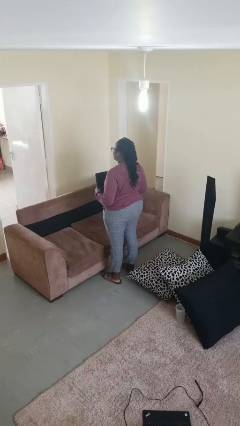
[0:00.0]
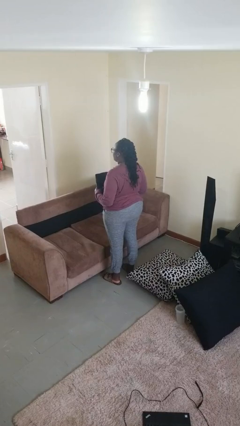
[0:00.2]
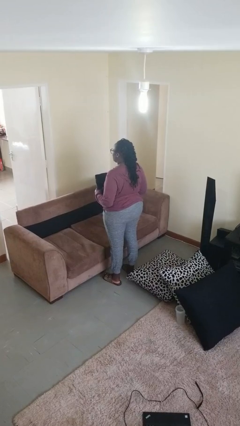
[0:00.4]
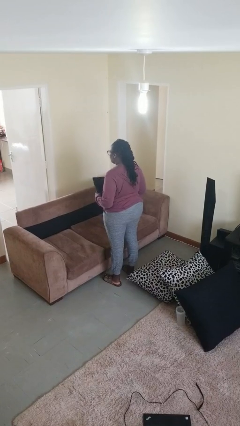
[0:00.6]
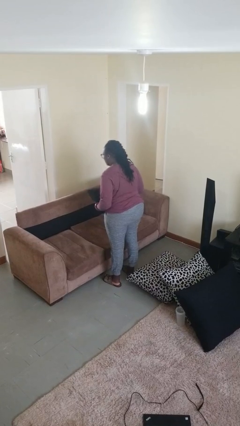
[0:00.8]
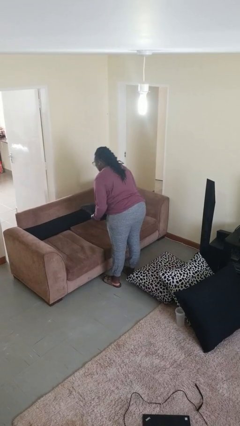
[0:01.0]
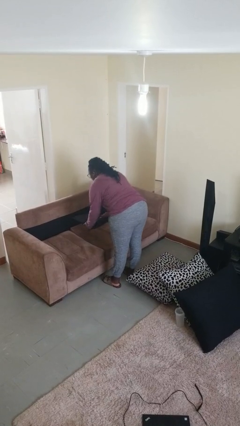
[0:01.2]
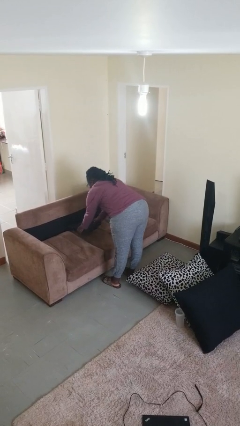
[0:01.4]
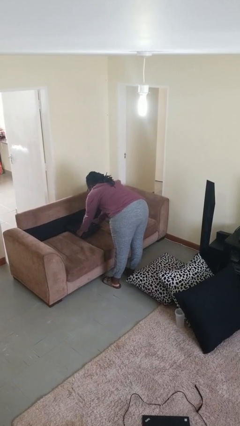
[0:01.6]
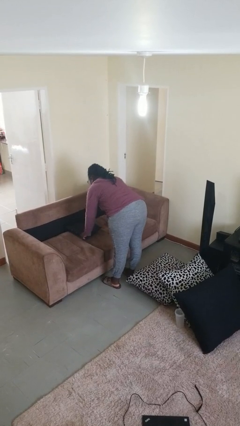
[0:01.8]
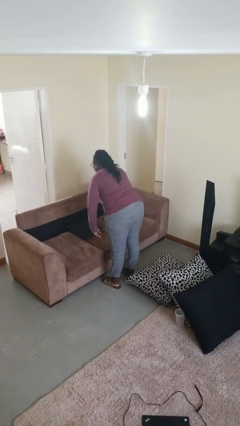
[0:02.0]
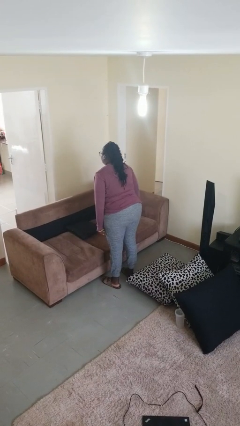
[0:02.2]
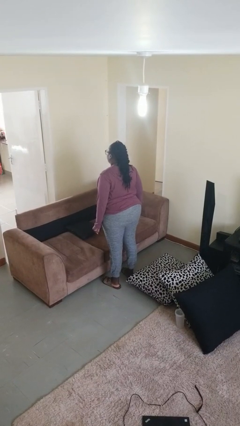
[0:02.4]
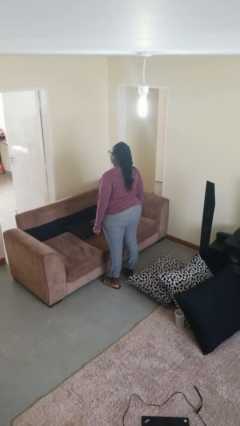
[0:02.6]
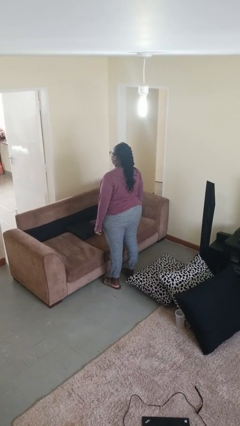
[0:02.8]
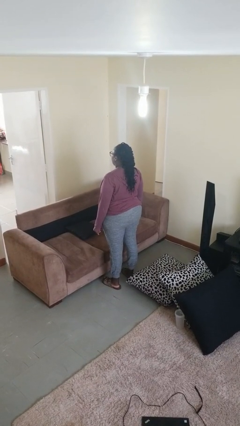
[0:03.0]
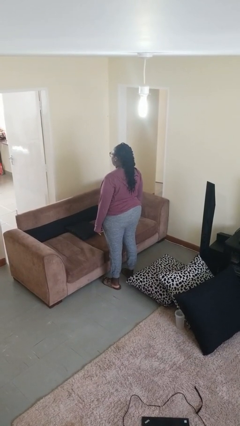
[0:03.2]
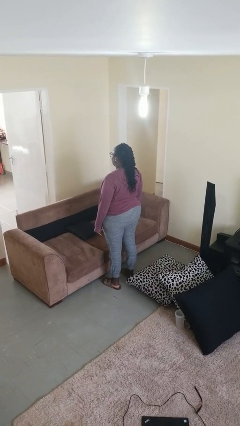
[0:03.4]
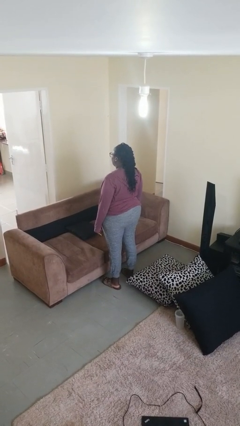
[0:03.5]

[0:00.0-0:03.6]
person puts down object on couch

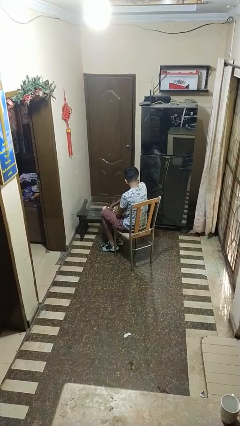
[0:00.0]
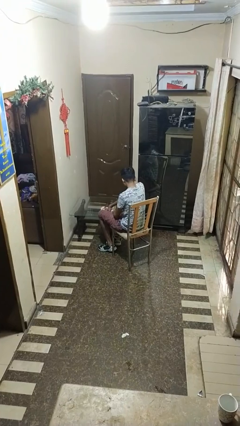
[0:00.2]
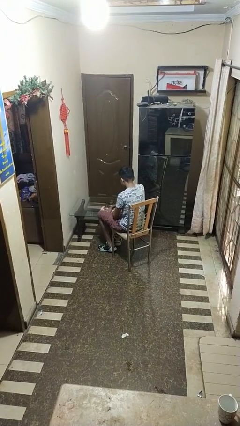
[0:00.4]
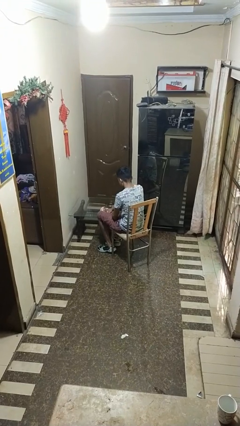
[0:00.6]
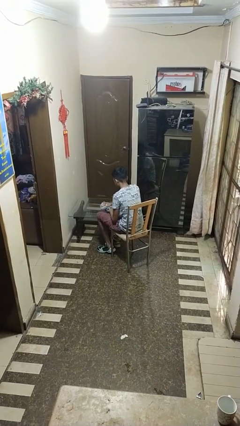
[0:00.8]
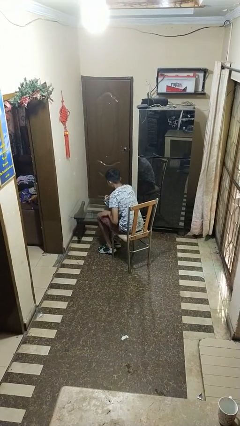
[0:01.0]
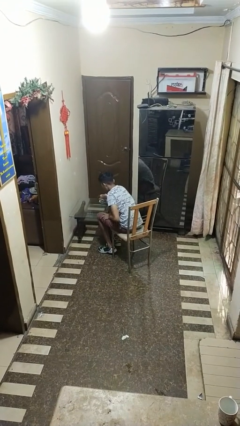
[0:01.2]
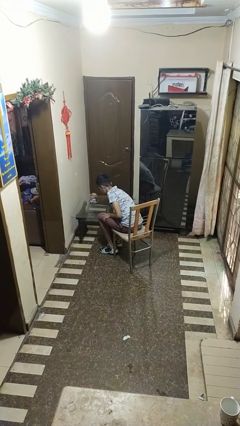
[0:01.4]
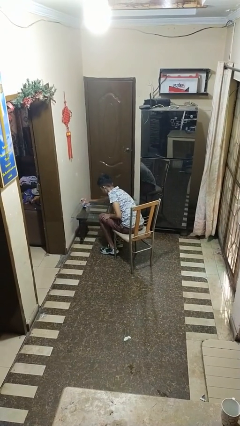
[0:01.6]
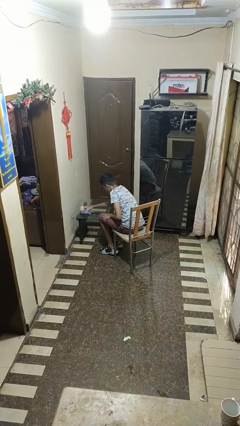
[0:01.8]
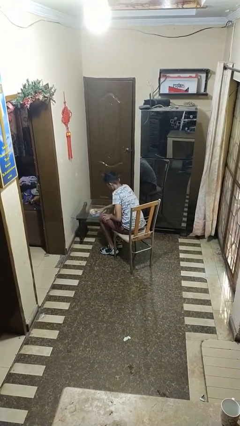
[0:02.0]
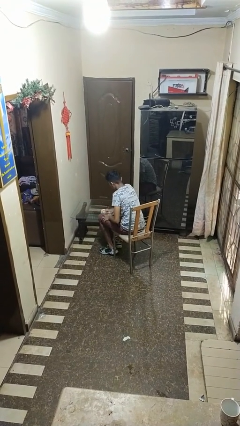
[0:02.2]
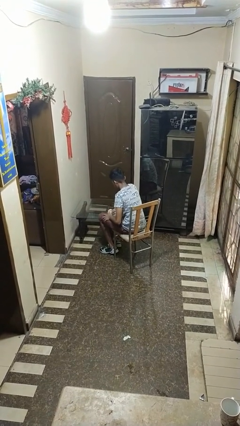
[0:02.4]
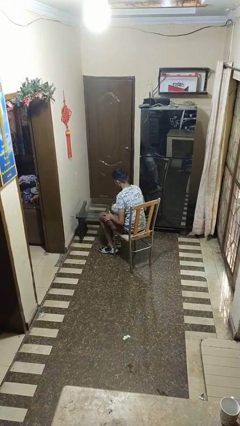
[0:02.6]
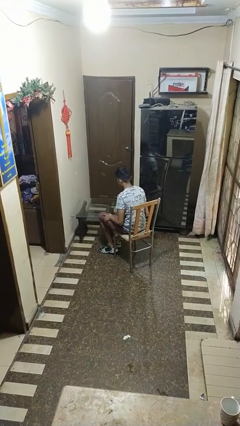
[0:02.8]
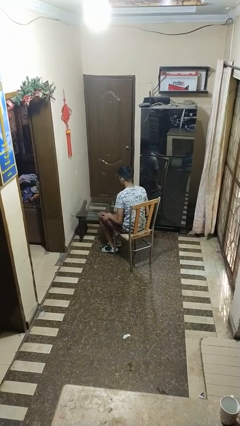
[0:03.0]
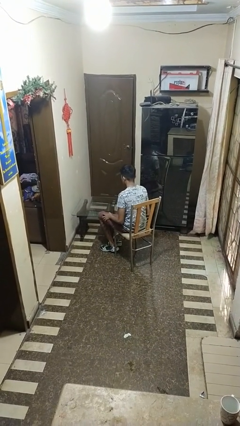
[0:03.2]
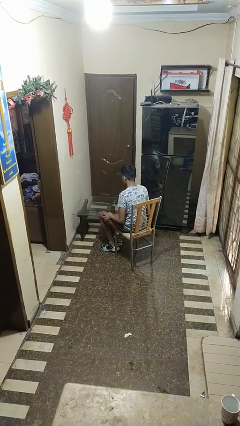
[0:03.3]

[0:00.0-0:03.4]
person cleans table with rag

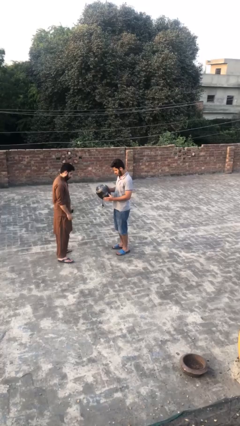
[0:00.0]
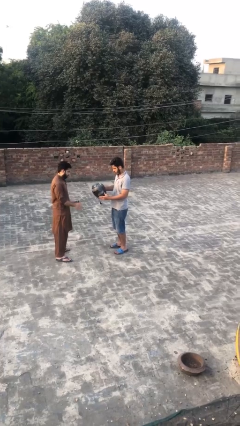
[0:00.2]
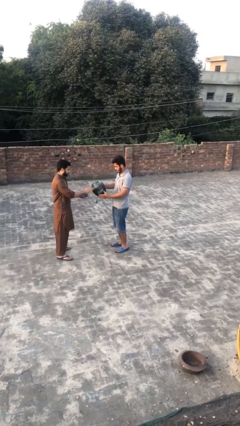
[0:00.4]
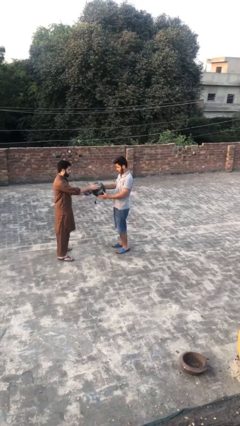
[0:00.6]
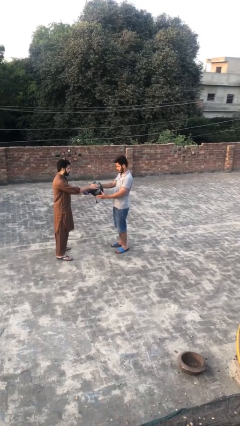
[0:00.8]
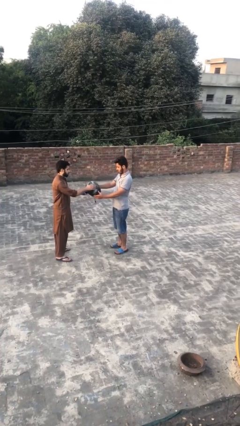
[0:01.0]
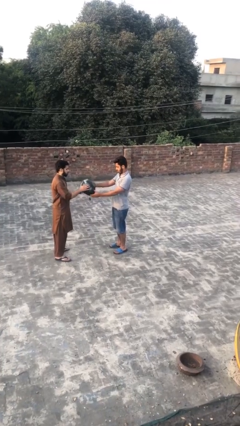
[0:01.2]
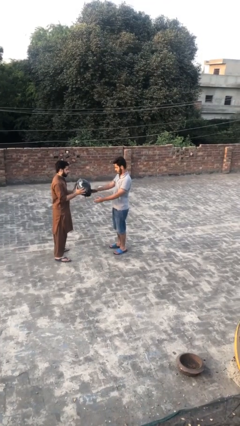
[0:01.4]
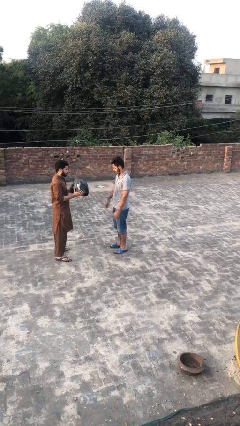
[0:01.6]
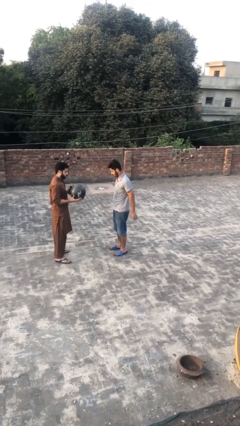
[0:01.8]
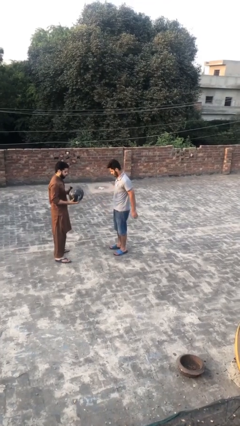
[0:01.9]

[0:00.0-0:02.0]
person transfers object to person

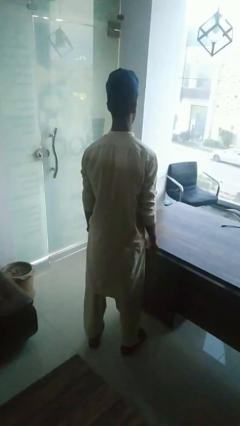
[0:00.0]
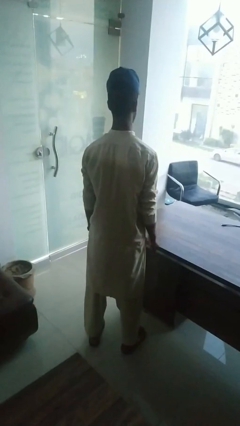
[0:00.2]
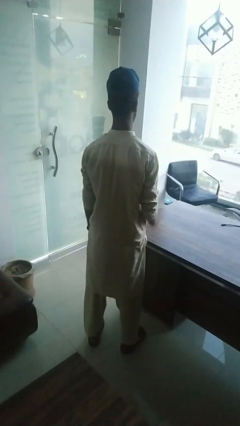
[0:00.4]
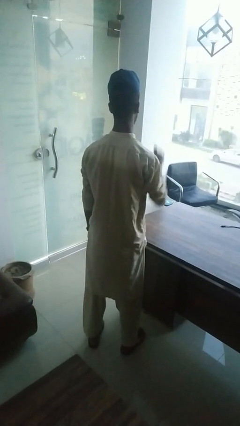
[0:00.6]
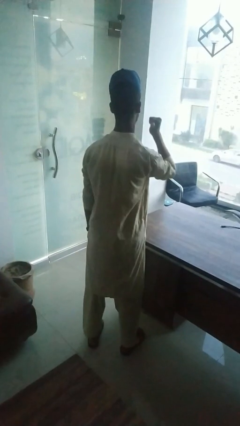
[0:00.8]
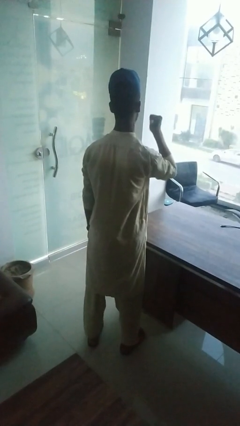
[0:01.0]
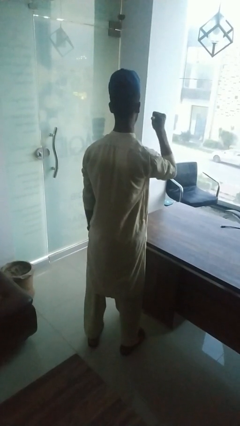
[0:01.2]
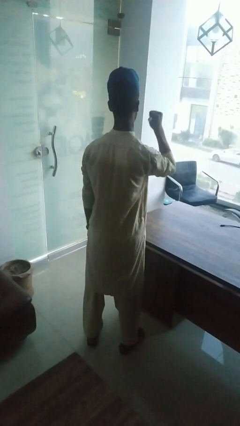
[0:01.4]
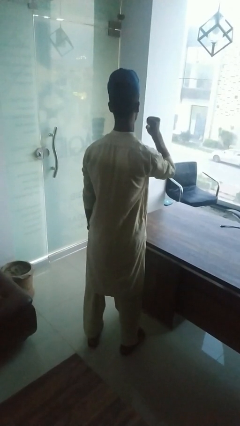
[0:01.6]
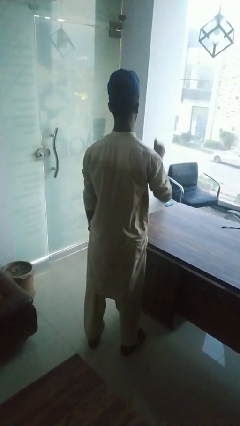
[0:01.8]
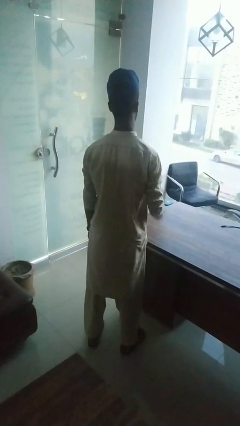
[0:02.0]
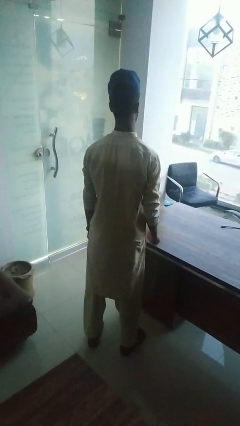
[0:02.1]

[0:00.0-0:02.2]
person gestures behind me

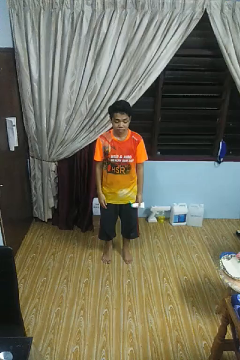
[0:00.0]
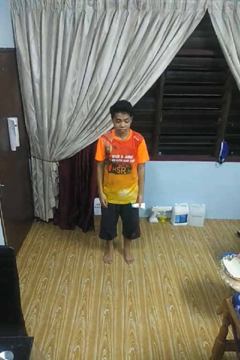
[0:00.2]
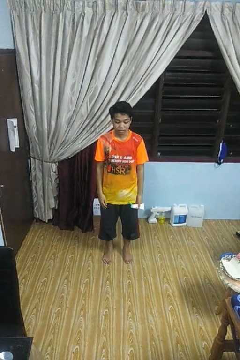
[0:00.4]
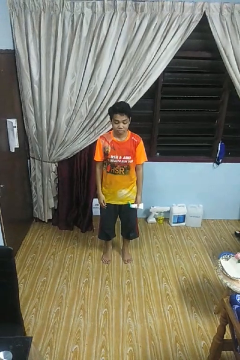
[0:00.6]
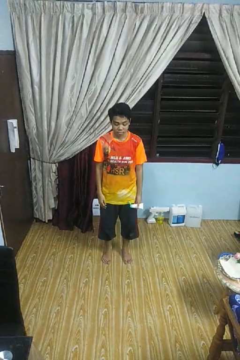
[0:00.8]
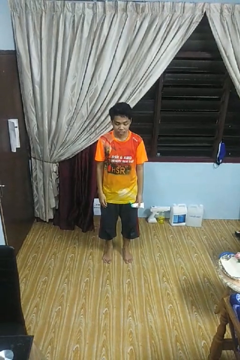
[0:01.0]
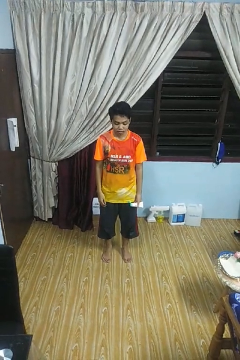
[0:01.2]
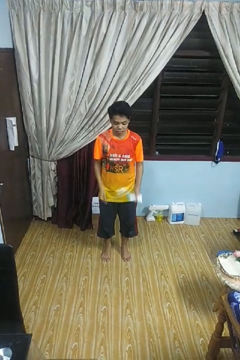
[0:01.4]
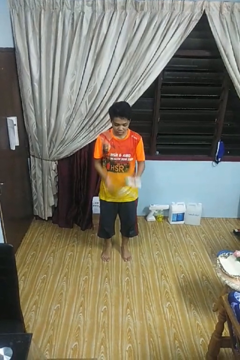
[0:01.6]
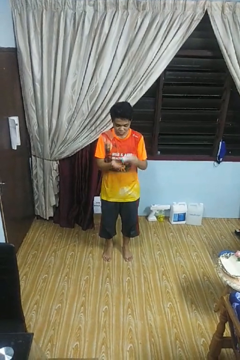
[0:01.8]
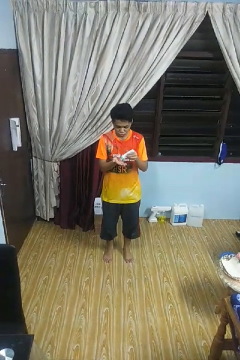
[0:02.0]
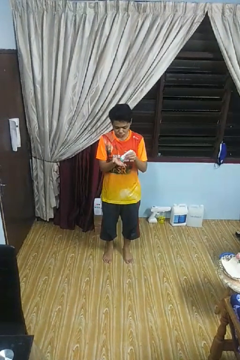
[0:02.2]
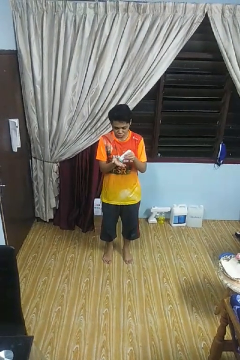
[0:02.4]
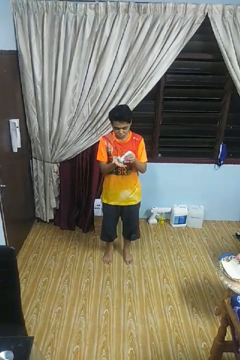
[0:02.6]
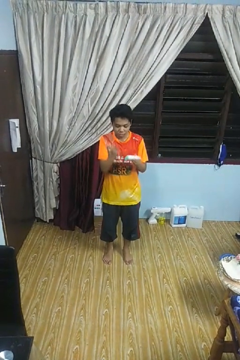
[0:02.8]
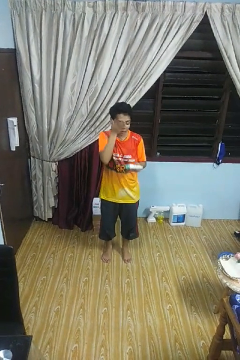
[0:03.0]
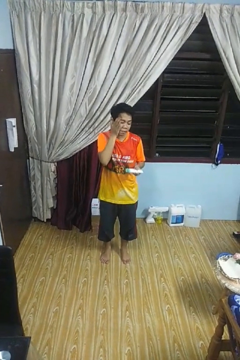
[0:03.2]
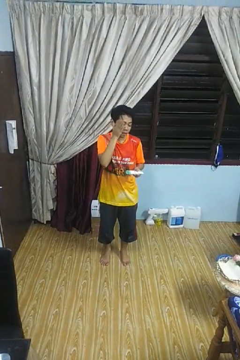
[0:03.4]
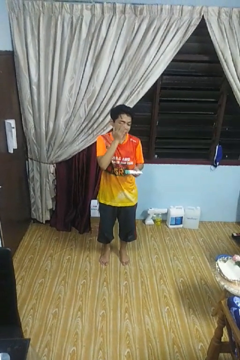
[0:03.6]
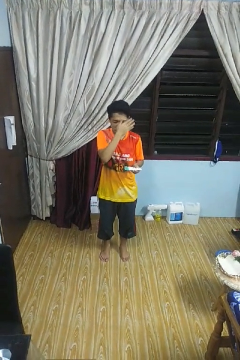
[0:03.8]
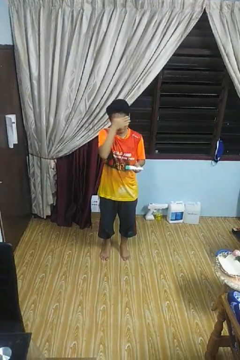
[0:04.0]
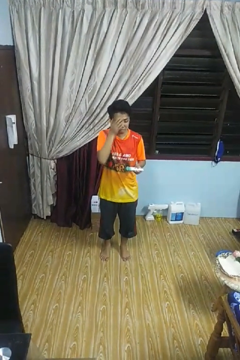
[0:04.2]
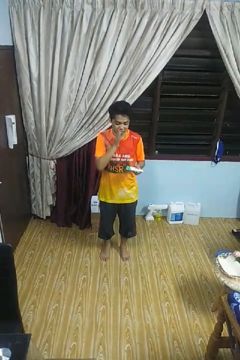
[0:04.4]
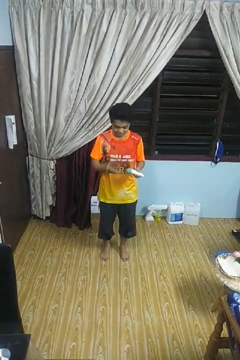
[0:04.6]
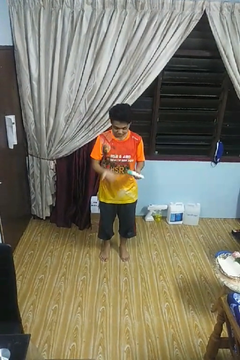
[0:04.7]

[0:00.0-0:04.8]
person applies facial moisturizer

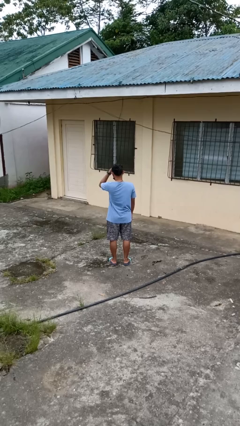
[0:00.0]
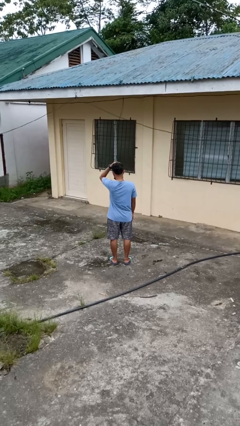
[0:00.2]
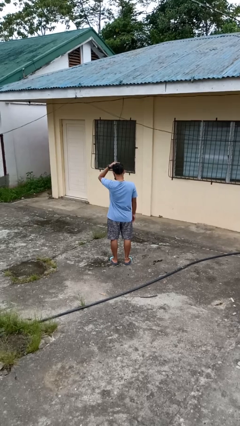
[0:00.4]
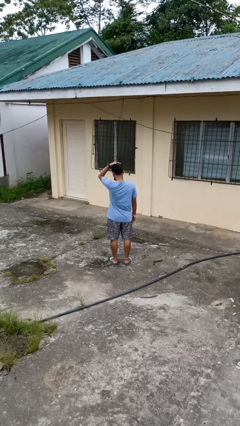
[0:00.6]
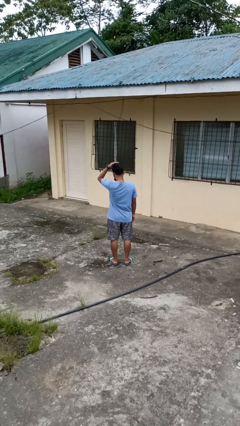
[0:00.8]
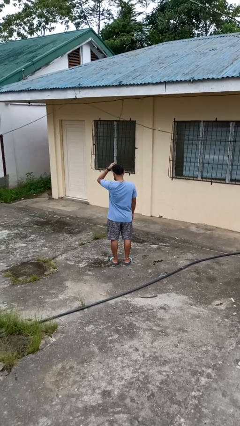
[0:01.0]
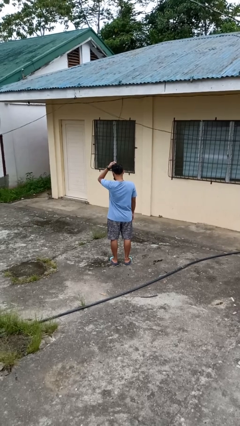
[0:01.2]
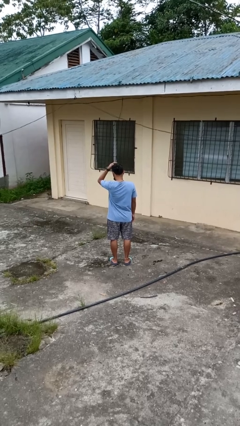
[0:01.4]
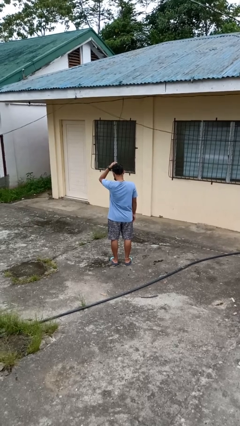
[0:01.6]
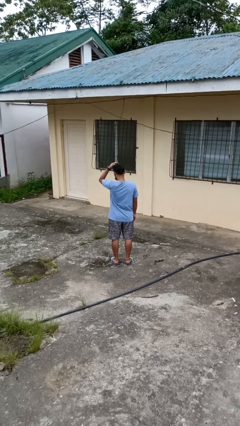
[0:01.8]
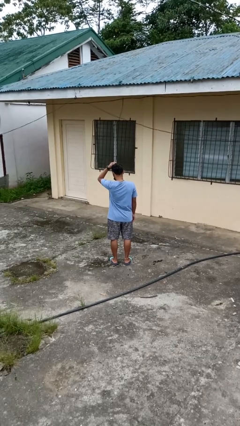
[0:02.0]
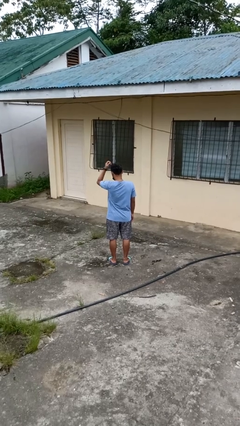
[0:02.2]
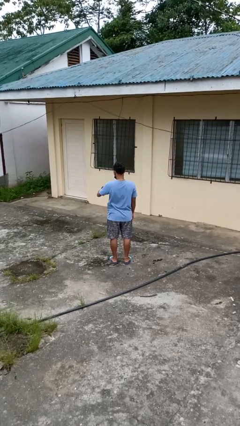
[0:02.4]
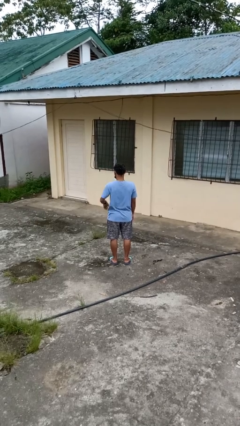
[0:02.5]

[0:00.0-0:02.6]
person scratches face

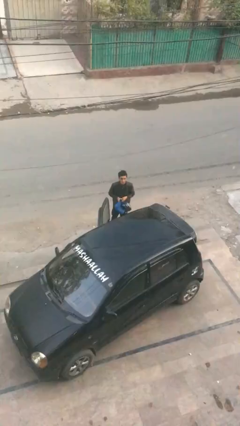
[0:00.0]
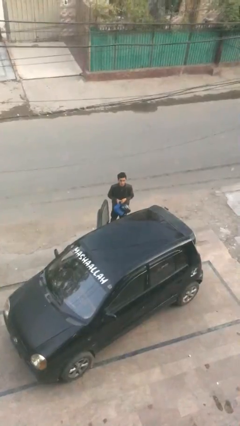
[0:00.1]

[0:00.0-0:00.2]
person loads car
